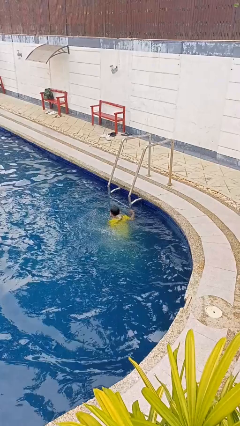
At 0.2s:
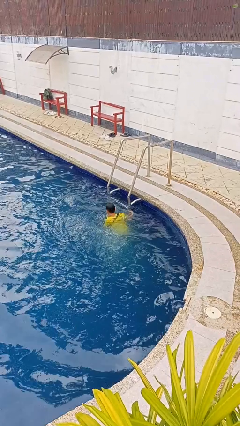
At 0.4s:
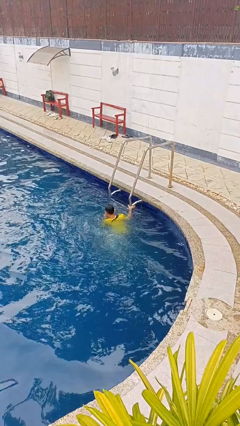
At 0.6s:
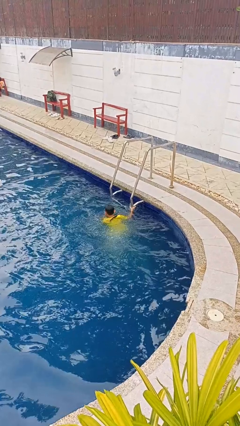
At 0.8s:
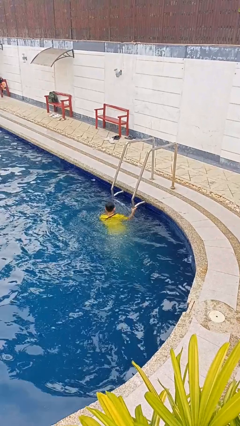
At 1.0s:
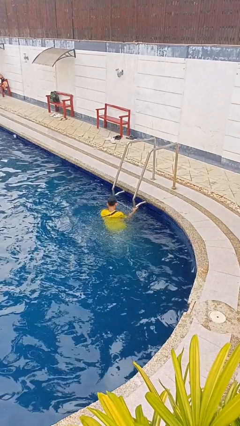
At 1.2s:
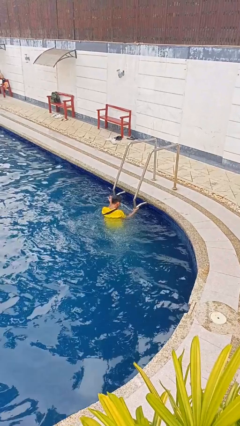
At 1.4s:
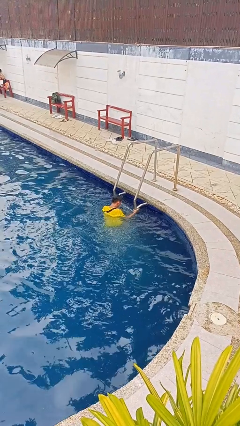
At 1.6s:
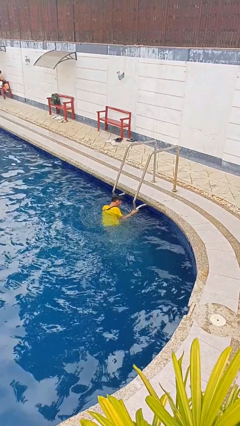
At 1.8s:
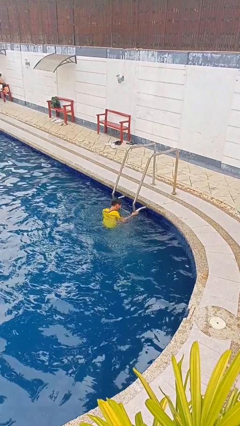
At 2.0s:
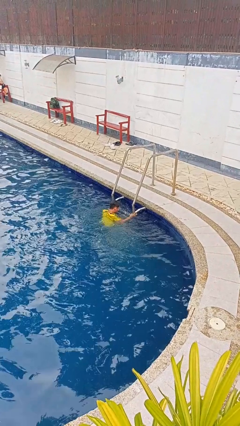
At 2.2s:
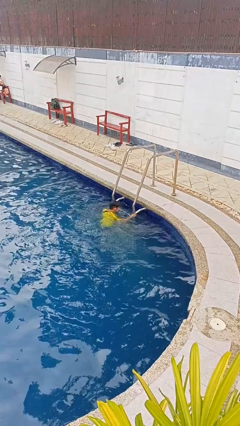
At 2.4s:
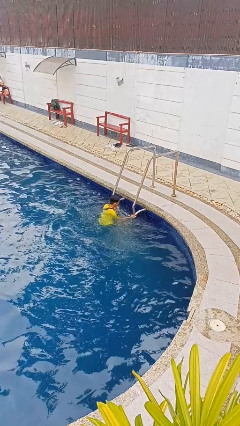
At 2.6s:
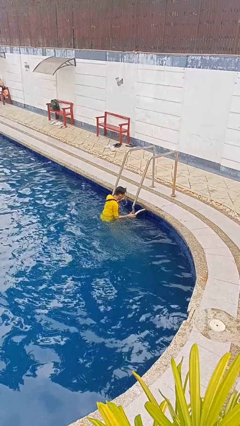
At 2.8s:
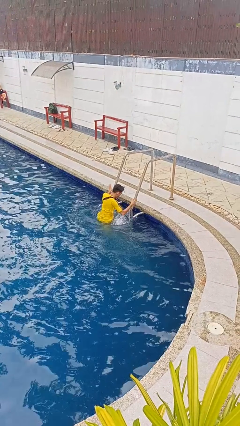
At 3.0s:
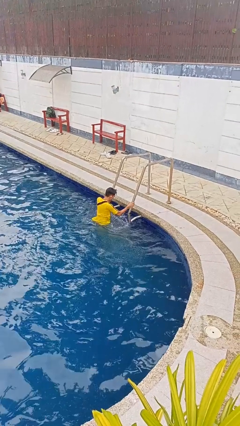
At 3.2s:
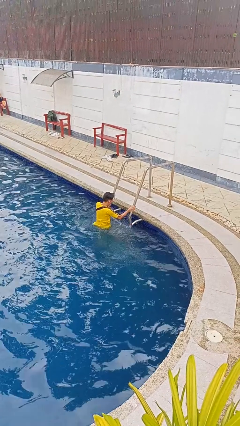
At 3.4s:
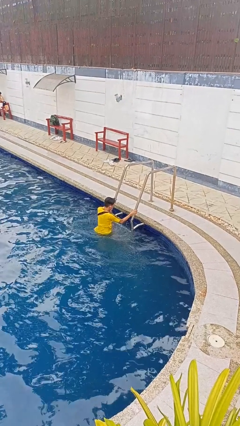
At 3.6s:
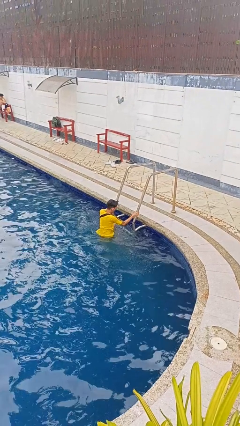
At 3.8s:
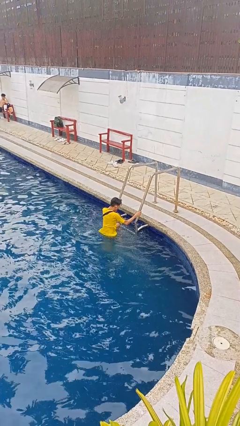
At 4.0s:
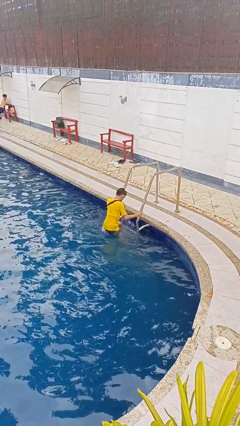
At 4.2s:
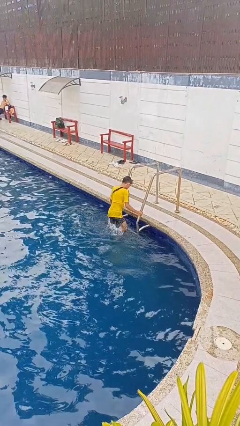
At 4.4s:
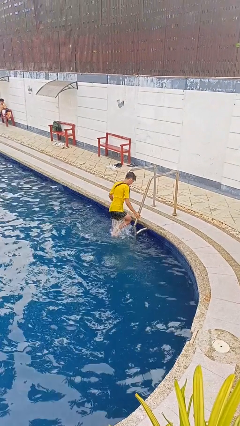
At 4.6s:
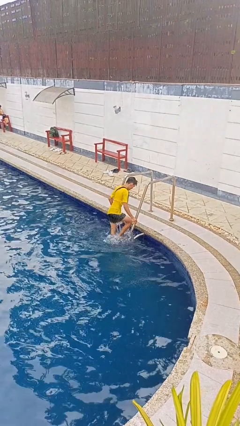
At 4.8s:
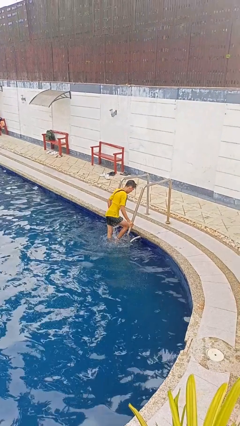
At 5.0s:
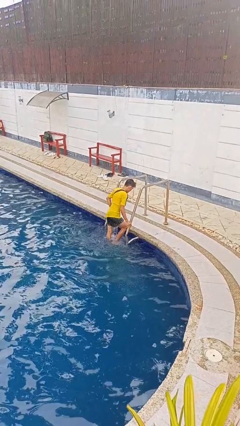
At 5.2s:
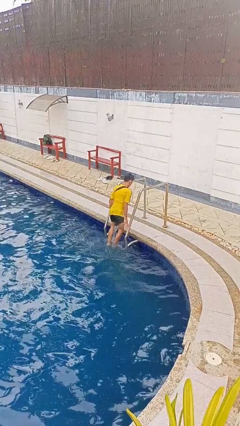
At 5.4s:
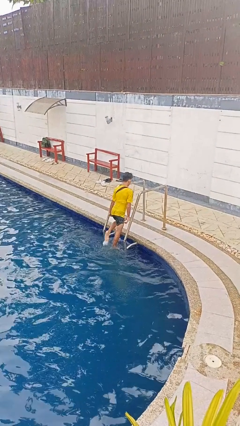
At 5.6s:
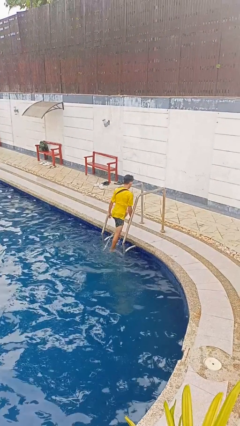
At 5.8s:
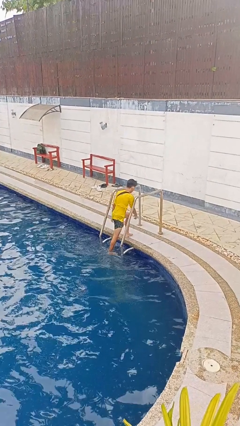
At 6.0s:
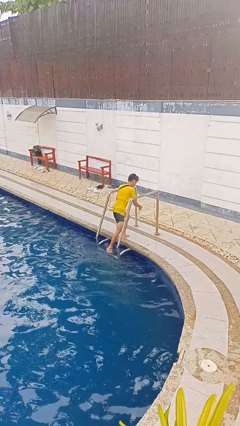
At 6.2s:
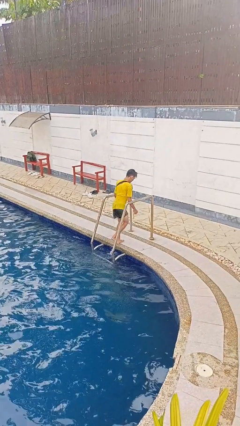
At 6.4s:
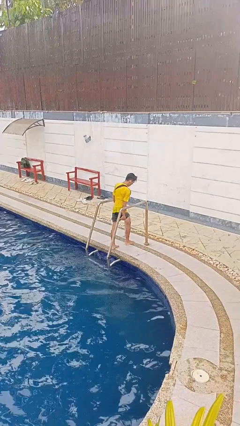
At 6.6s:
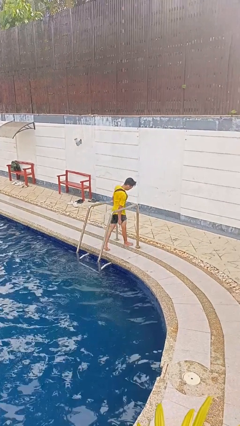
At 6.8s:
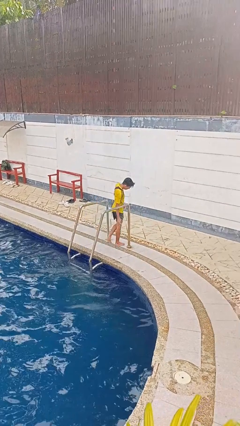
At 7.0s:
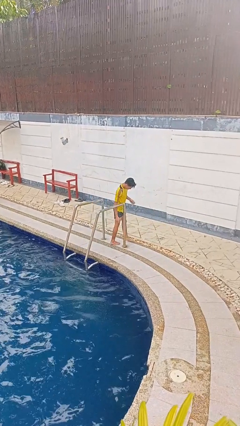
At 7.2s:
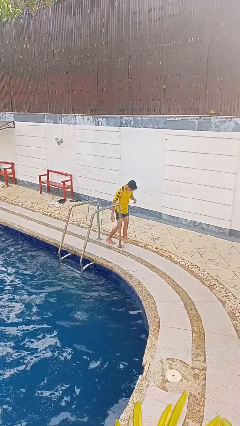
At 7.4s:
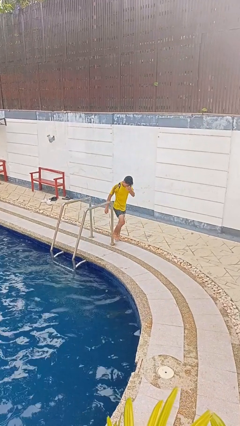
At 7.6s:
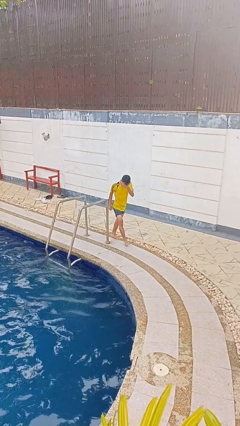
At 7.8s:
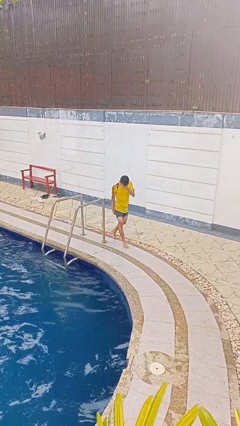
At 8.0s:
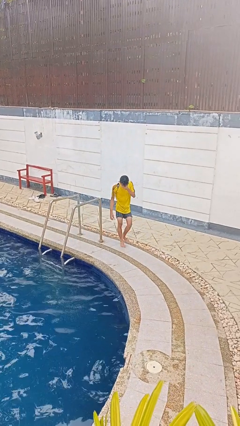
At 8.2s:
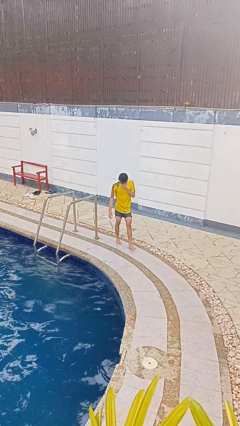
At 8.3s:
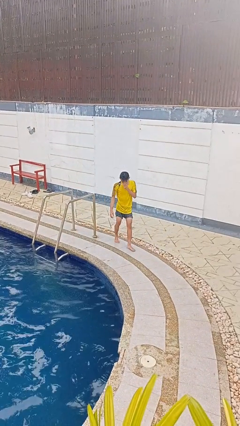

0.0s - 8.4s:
person exits pool

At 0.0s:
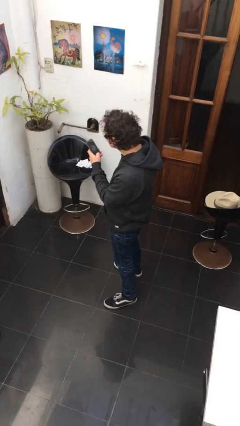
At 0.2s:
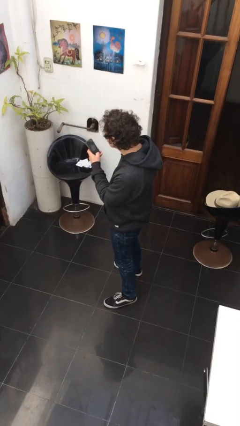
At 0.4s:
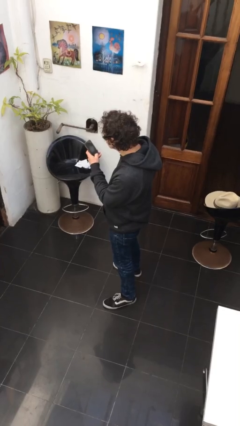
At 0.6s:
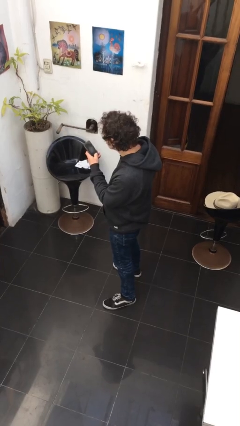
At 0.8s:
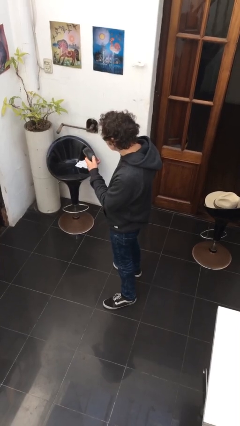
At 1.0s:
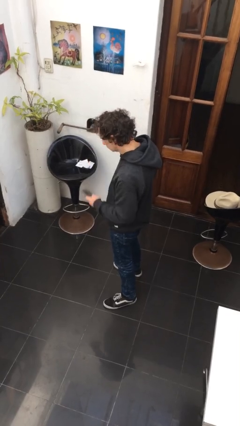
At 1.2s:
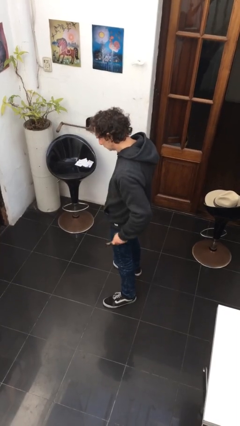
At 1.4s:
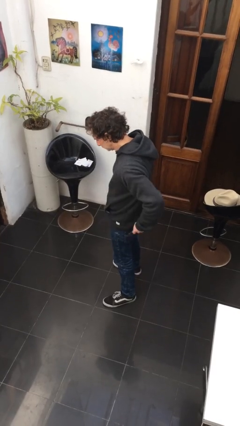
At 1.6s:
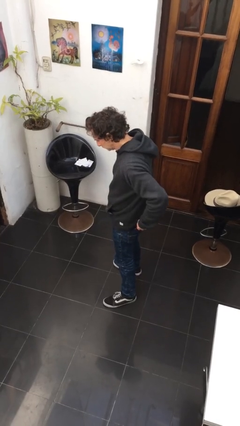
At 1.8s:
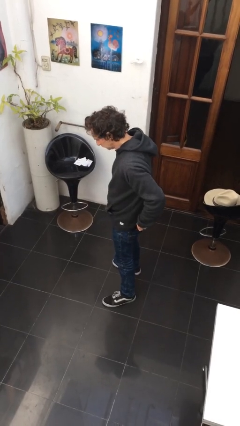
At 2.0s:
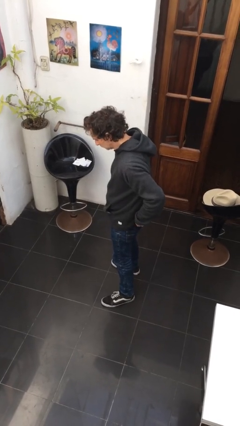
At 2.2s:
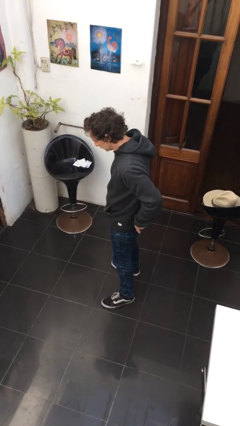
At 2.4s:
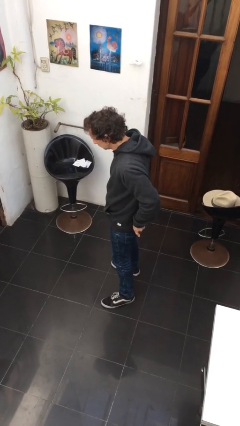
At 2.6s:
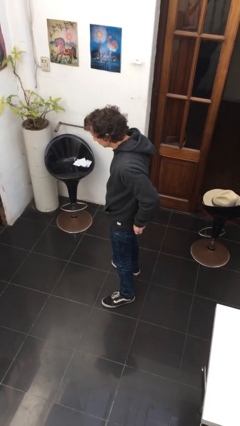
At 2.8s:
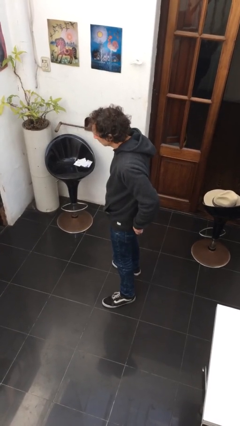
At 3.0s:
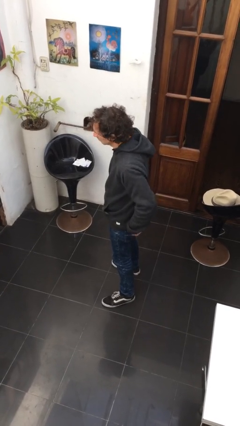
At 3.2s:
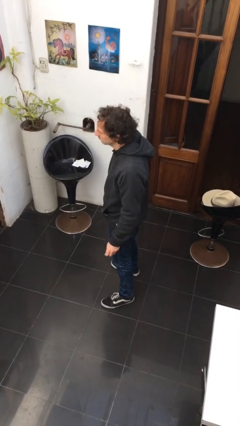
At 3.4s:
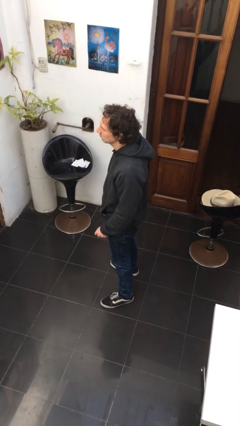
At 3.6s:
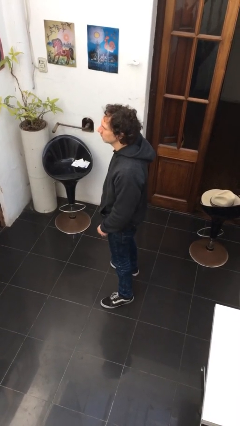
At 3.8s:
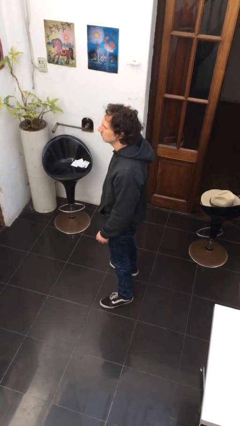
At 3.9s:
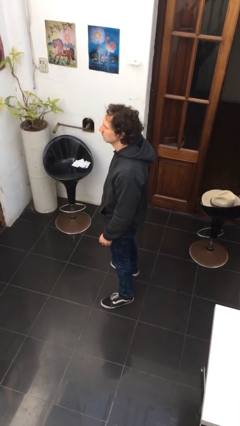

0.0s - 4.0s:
person puts phone into pocket

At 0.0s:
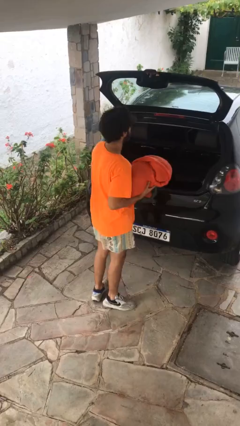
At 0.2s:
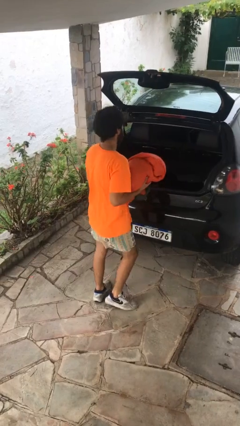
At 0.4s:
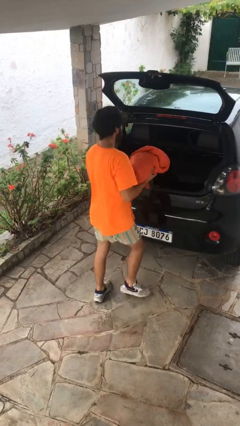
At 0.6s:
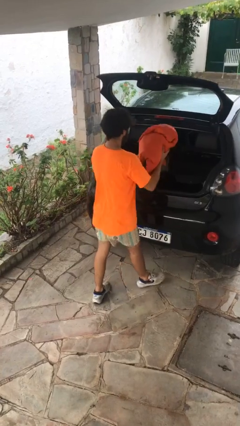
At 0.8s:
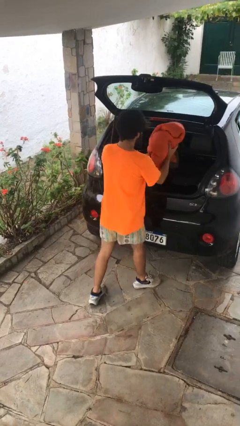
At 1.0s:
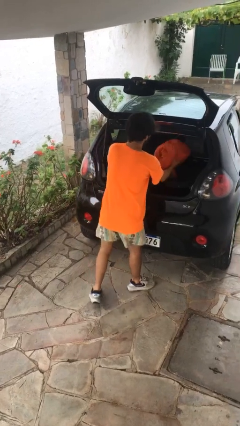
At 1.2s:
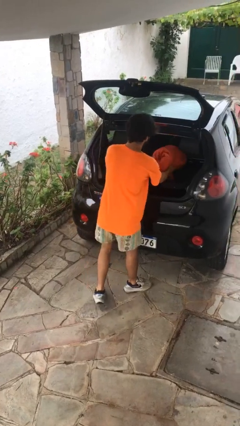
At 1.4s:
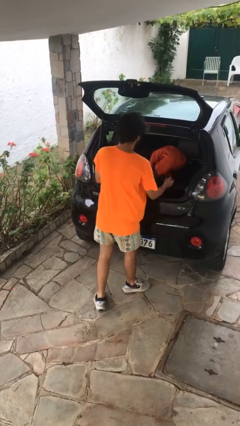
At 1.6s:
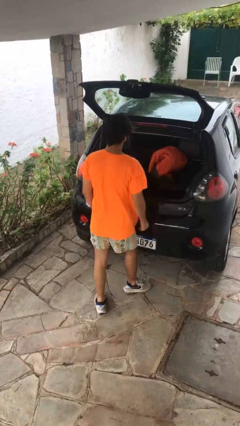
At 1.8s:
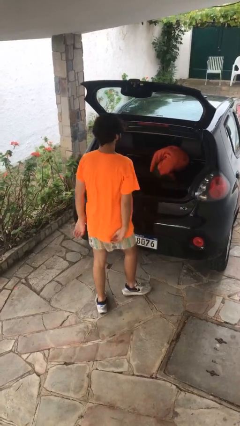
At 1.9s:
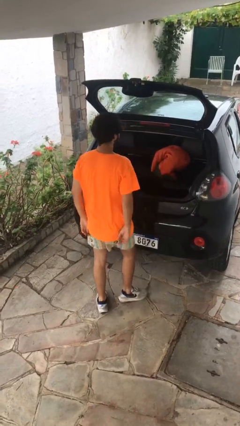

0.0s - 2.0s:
person loads car

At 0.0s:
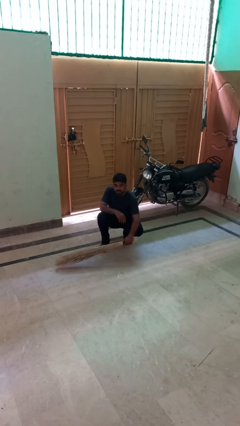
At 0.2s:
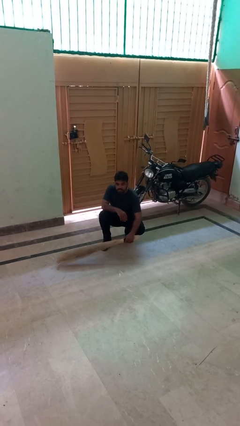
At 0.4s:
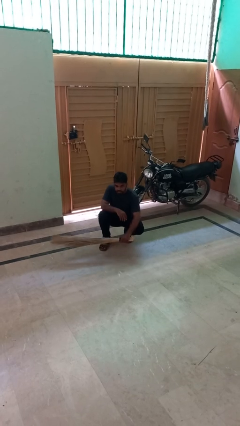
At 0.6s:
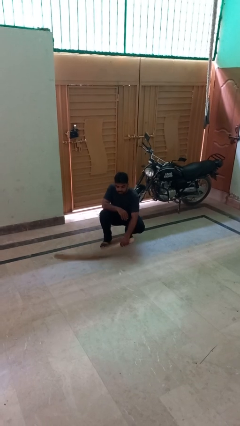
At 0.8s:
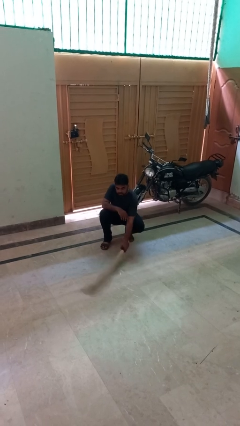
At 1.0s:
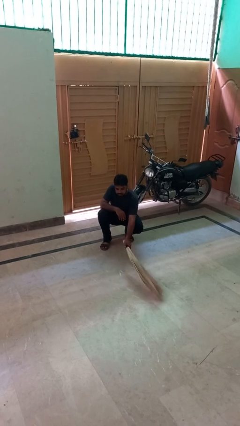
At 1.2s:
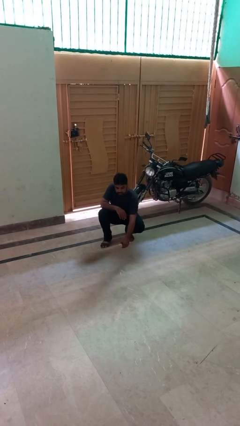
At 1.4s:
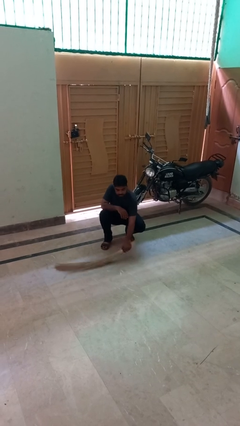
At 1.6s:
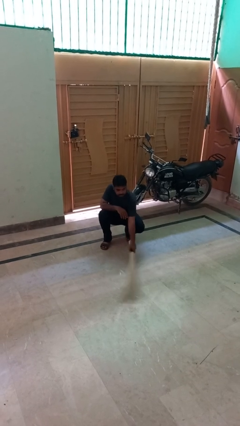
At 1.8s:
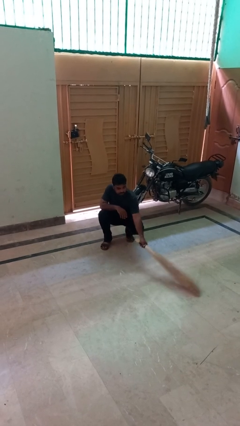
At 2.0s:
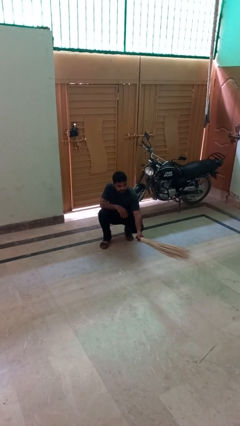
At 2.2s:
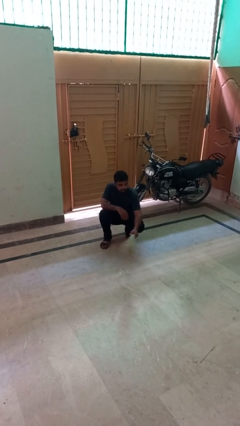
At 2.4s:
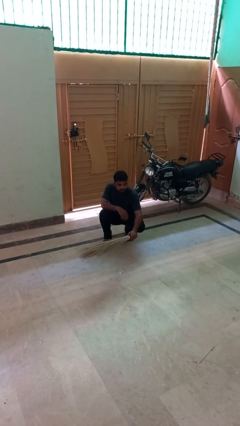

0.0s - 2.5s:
person sweeps floor

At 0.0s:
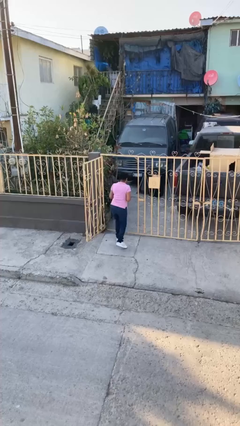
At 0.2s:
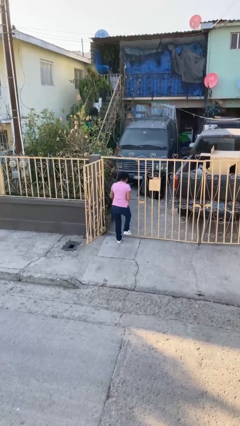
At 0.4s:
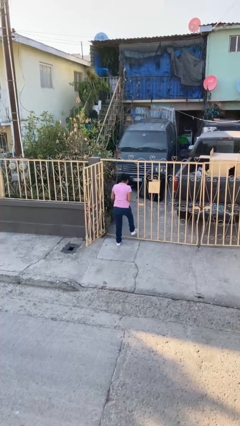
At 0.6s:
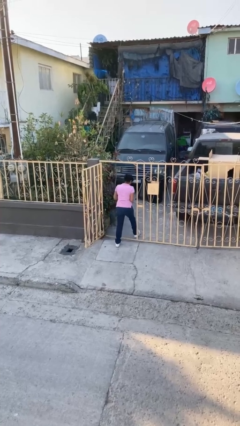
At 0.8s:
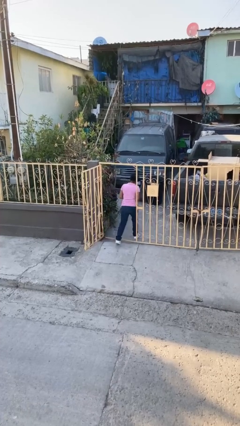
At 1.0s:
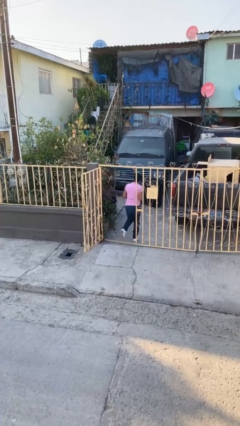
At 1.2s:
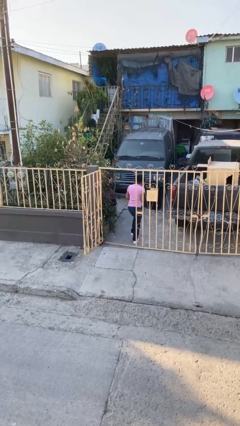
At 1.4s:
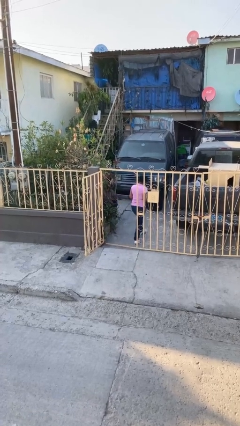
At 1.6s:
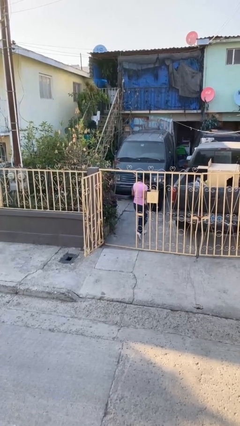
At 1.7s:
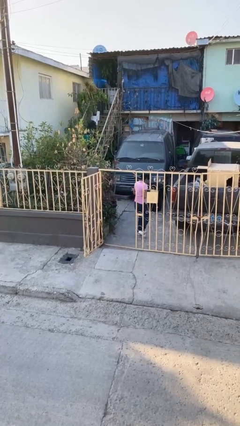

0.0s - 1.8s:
person exits scene through structure
